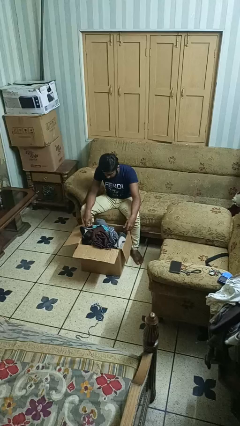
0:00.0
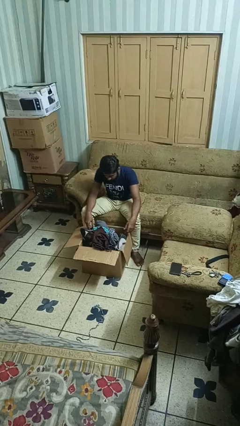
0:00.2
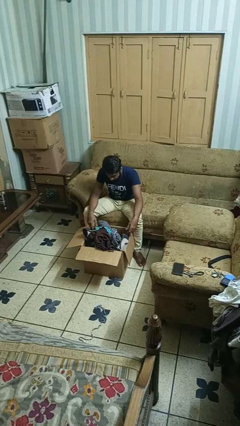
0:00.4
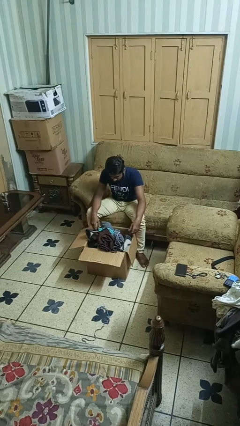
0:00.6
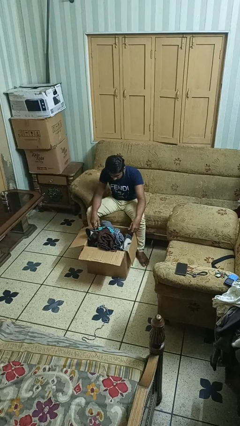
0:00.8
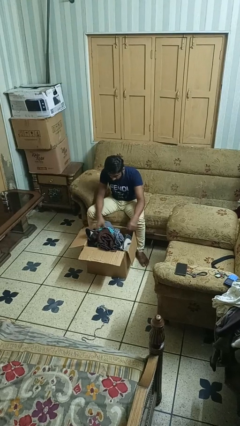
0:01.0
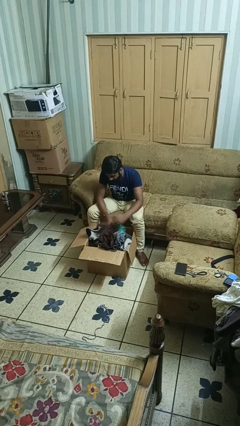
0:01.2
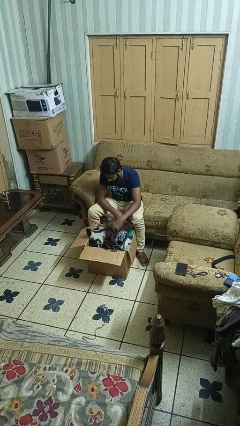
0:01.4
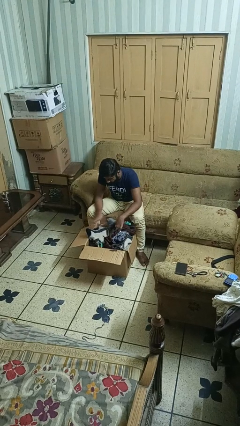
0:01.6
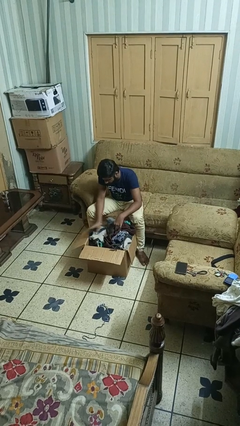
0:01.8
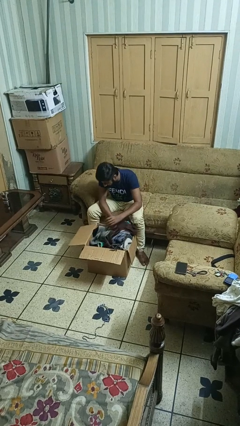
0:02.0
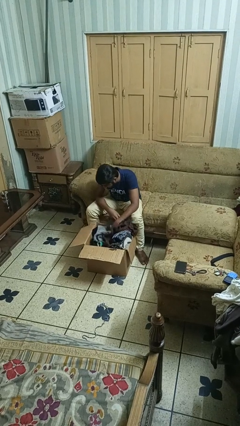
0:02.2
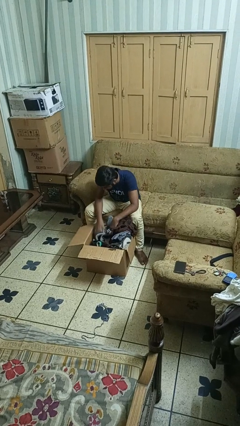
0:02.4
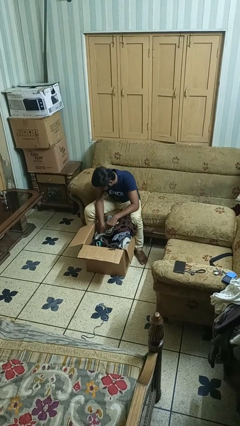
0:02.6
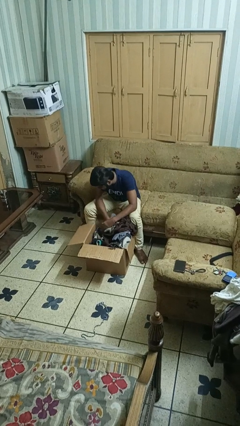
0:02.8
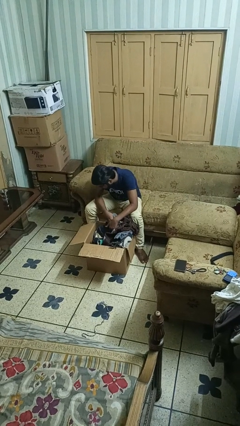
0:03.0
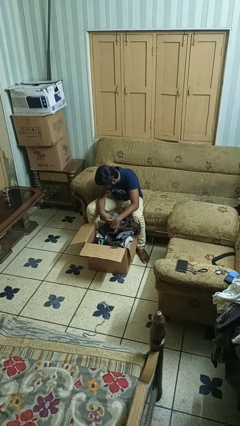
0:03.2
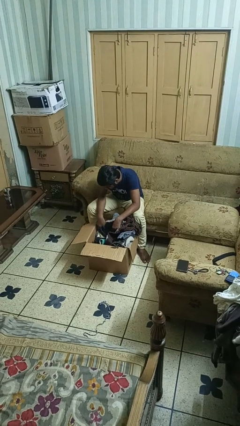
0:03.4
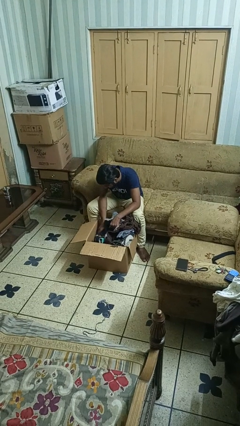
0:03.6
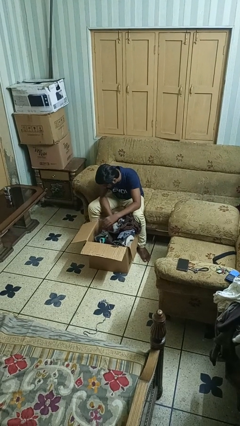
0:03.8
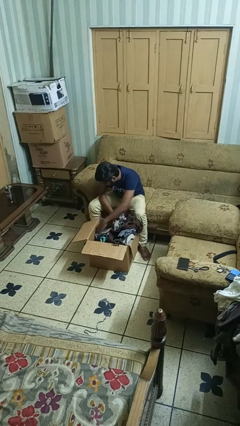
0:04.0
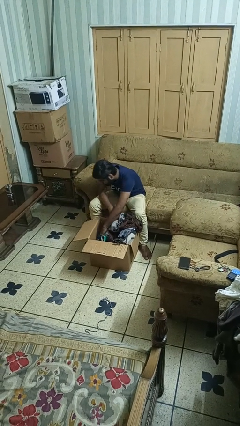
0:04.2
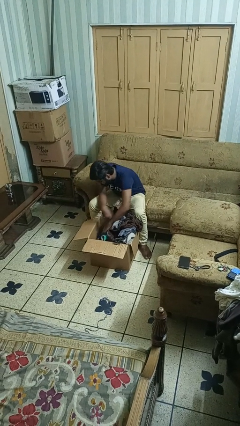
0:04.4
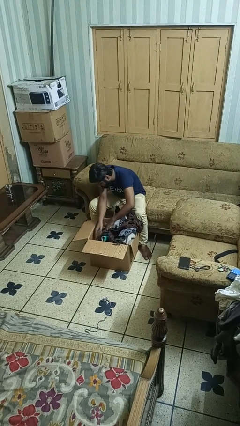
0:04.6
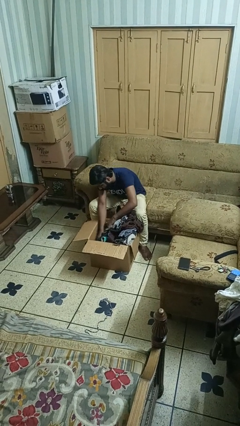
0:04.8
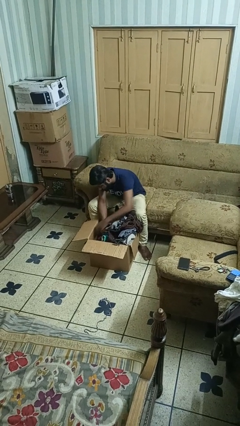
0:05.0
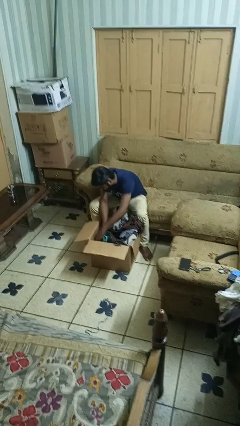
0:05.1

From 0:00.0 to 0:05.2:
person searches in box

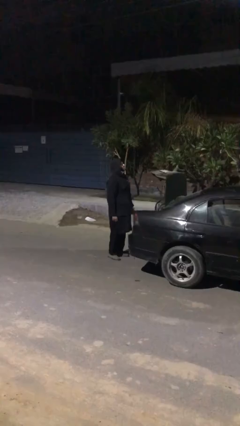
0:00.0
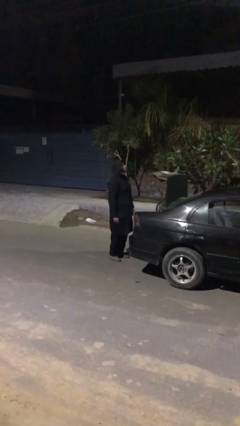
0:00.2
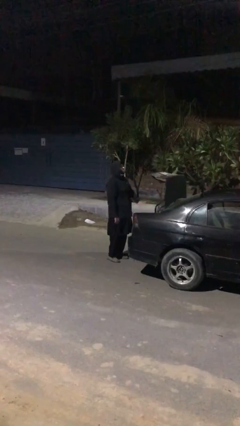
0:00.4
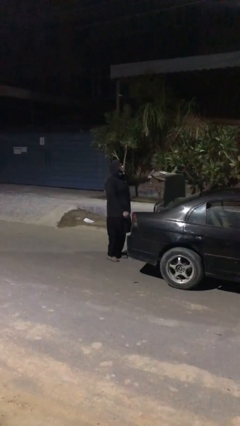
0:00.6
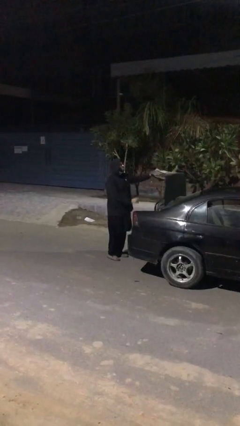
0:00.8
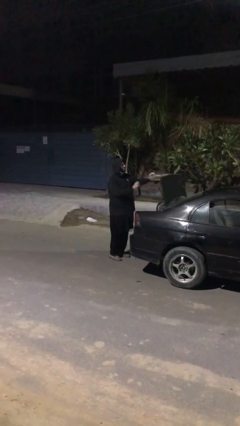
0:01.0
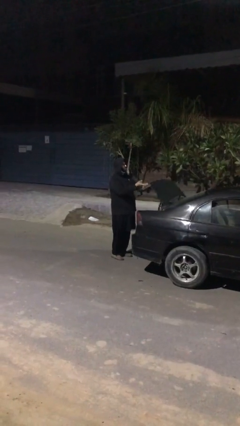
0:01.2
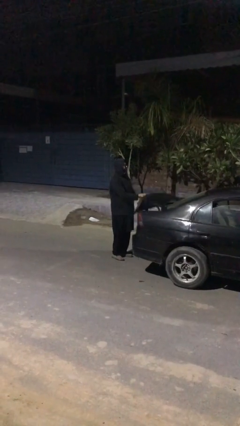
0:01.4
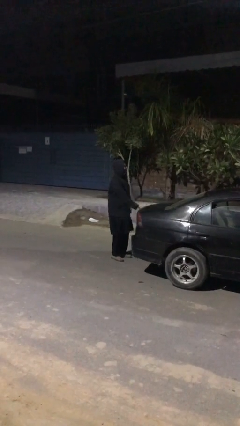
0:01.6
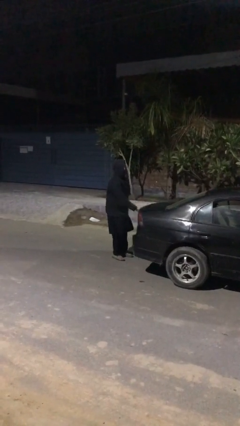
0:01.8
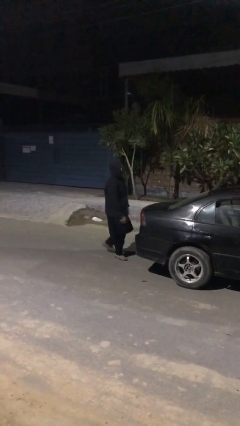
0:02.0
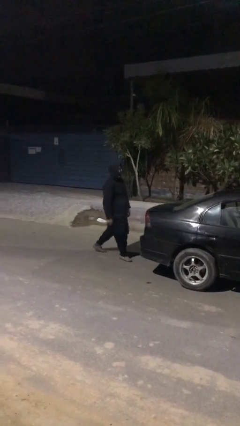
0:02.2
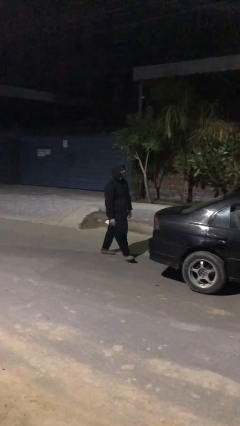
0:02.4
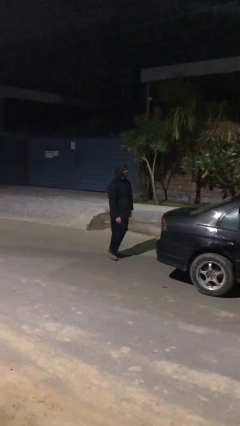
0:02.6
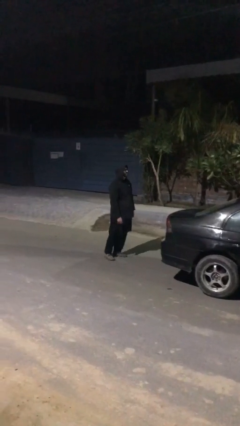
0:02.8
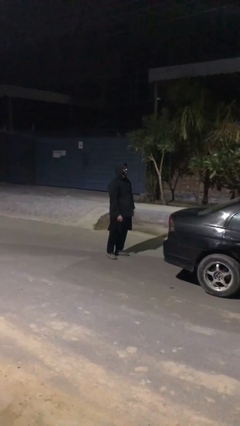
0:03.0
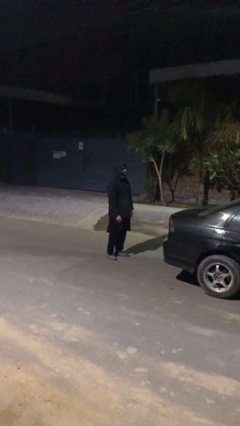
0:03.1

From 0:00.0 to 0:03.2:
person closes car trunk

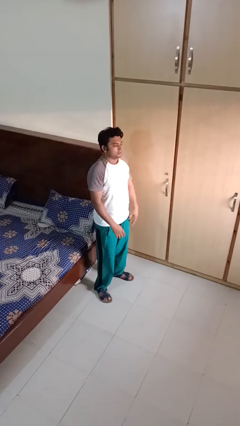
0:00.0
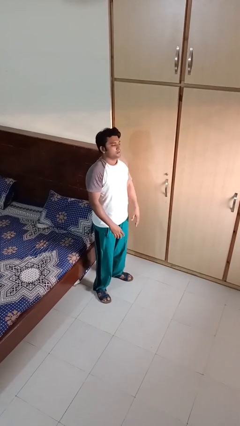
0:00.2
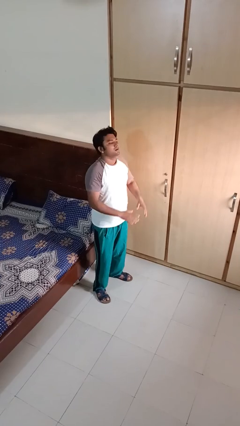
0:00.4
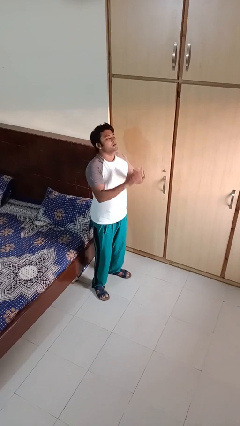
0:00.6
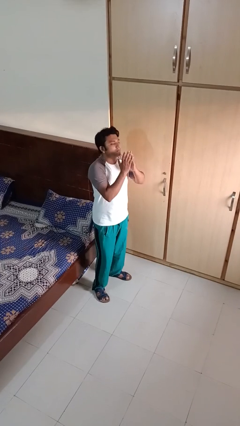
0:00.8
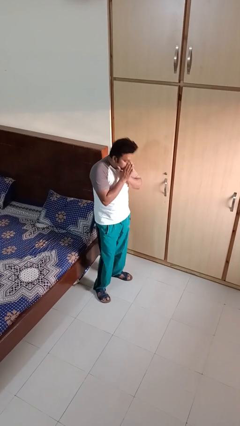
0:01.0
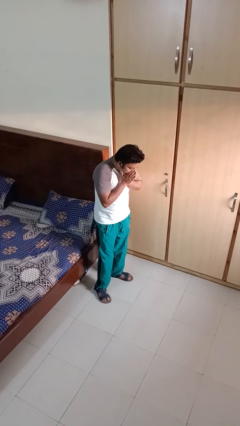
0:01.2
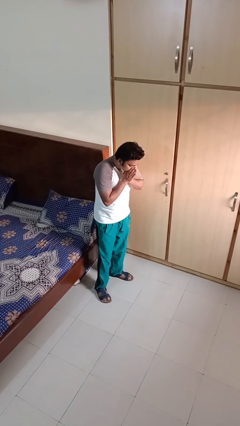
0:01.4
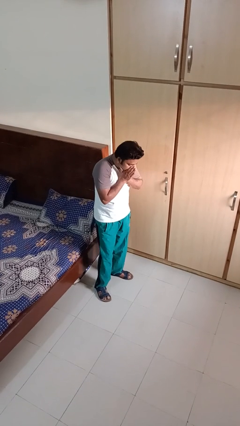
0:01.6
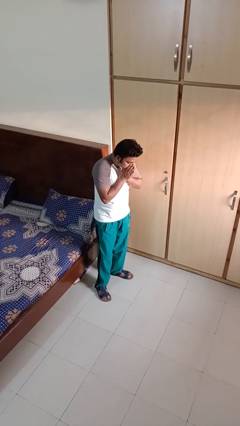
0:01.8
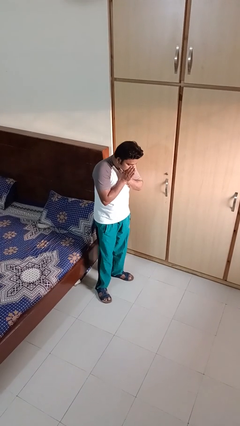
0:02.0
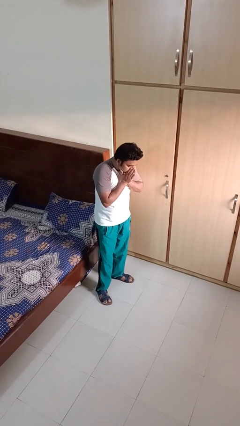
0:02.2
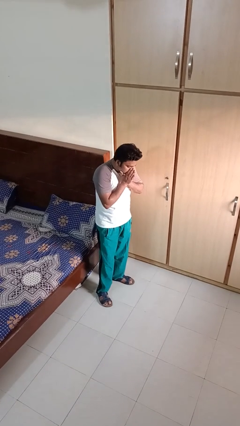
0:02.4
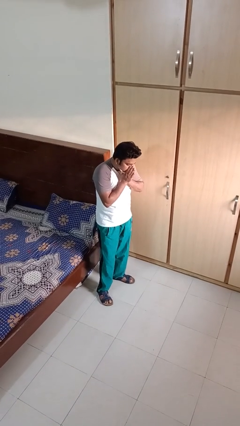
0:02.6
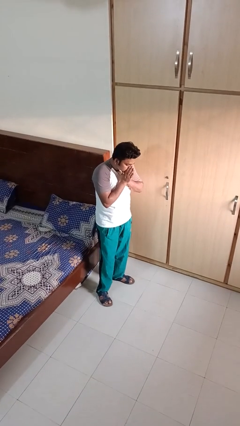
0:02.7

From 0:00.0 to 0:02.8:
person sneezes into hand

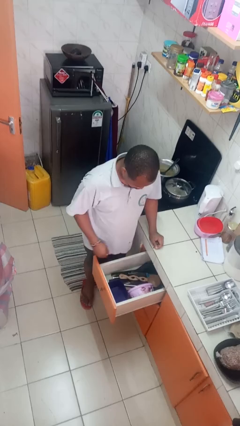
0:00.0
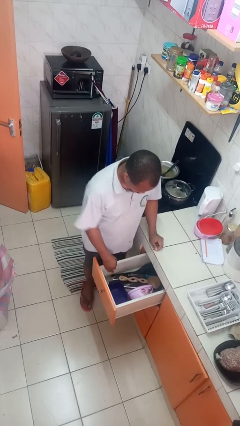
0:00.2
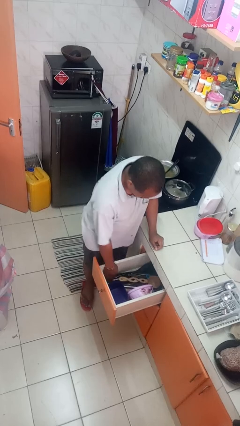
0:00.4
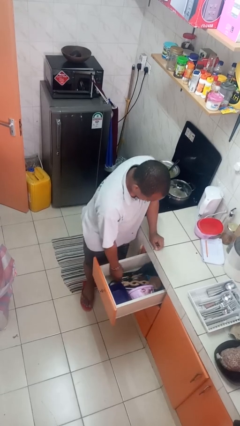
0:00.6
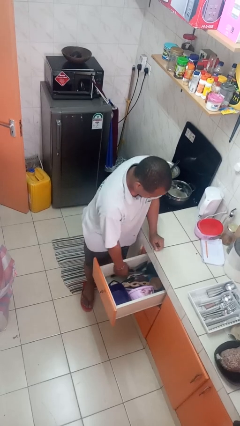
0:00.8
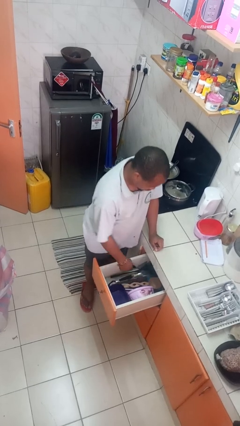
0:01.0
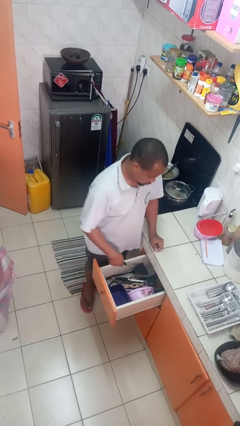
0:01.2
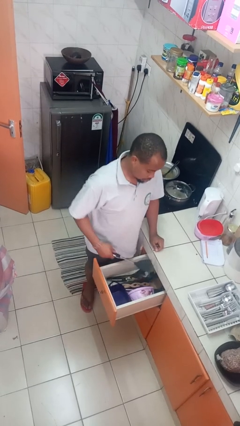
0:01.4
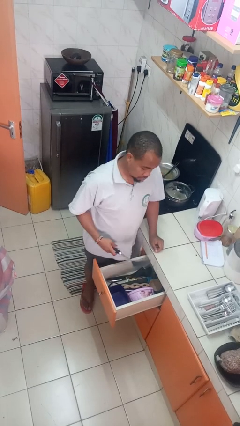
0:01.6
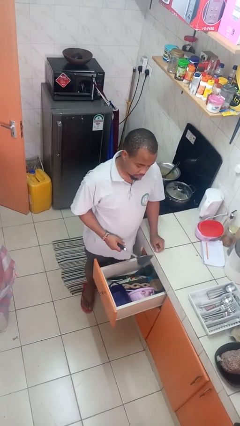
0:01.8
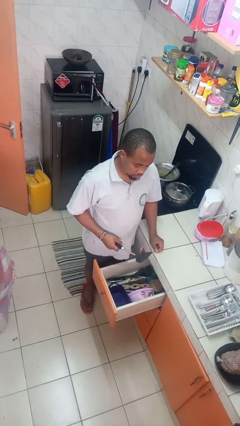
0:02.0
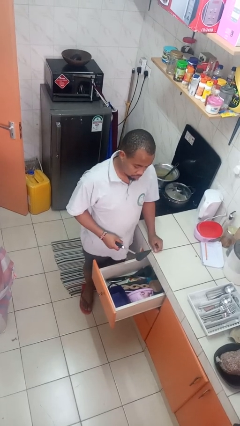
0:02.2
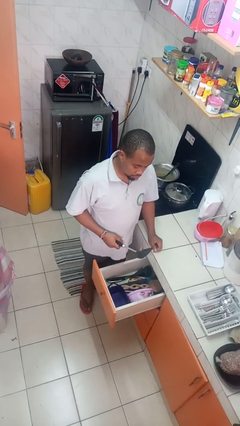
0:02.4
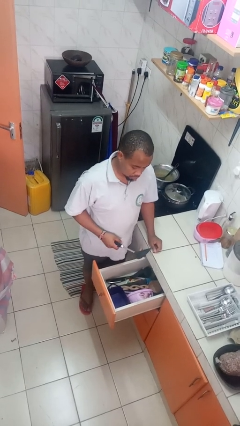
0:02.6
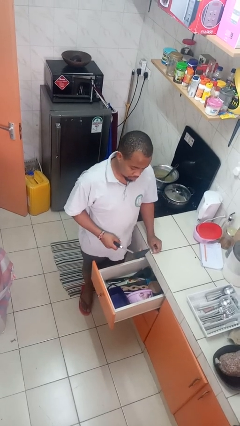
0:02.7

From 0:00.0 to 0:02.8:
person takes object from kitchen drawer

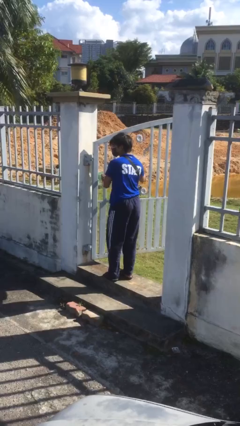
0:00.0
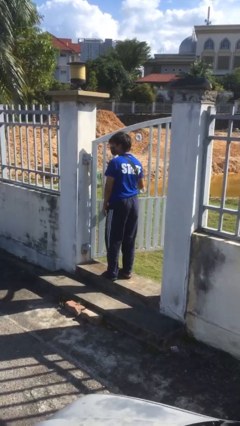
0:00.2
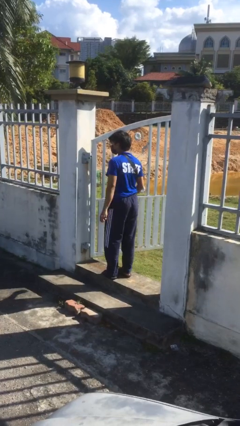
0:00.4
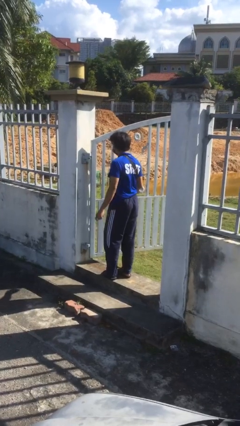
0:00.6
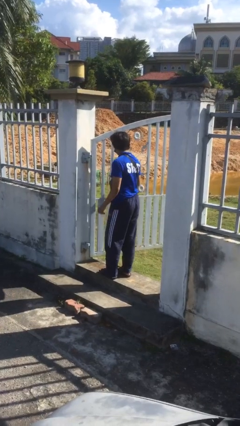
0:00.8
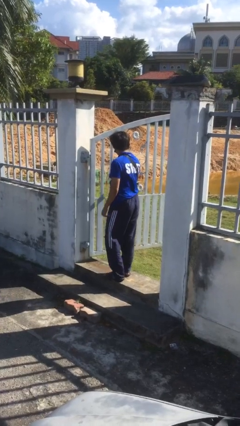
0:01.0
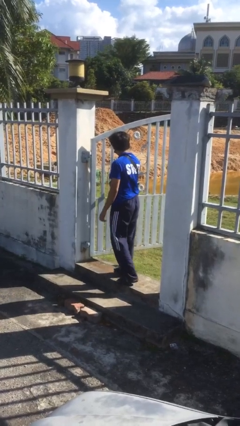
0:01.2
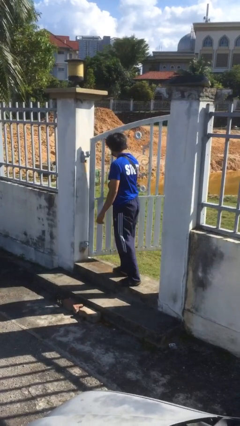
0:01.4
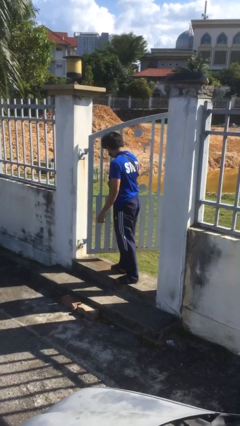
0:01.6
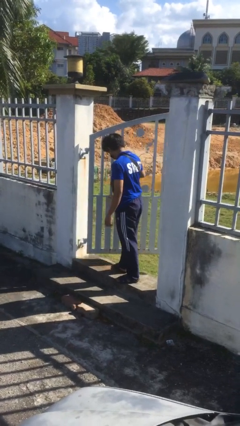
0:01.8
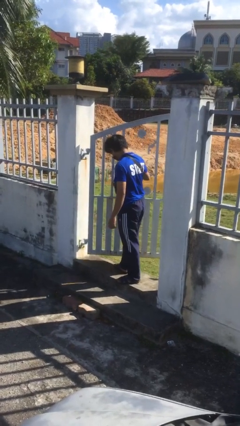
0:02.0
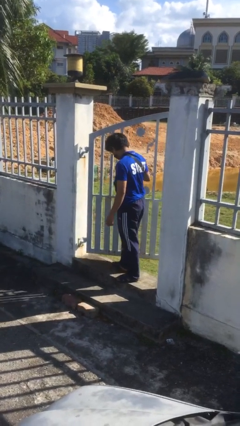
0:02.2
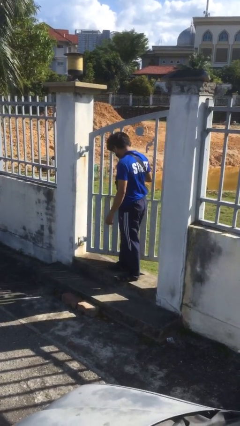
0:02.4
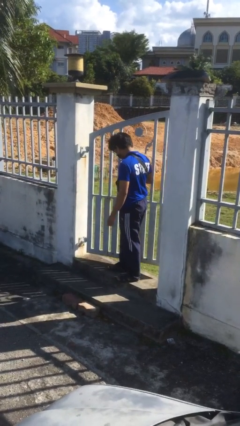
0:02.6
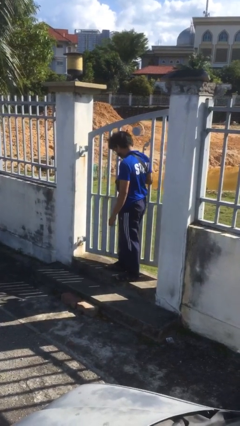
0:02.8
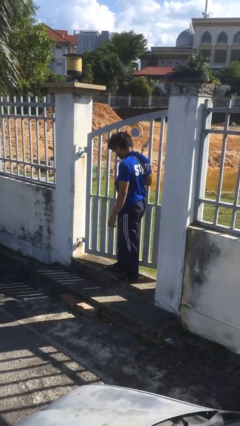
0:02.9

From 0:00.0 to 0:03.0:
person closes facility door

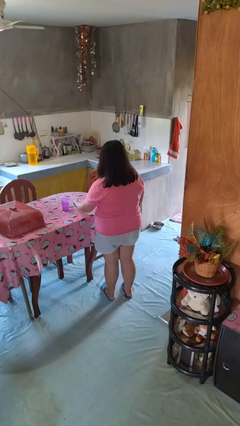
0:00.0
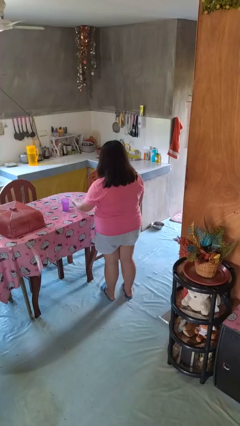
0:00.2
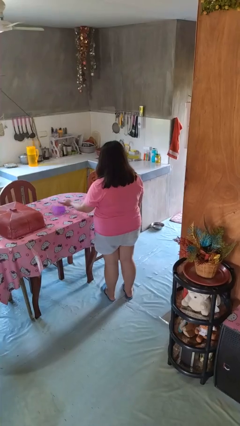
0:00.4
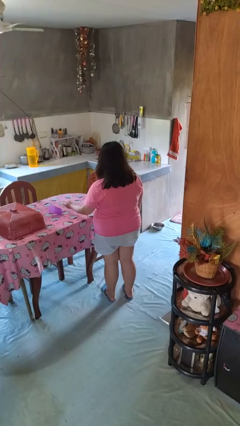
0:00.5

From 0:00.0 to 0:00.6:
person knocks over glass
